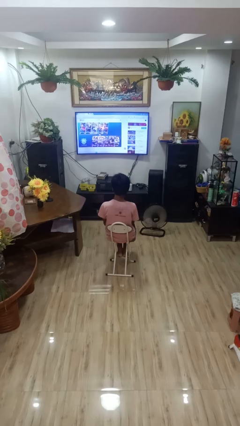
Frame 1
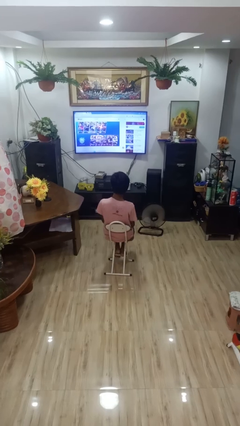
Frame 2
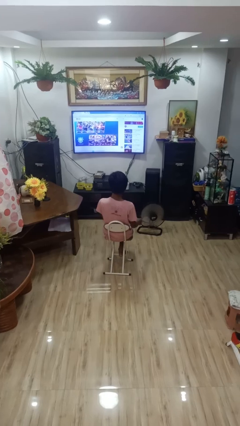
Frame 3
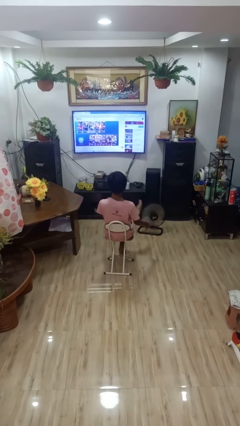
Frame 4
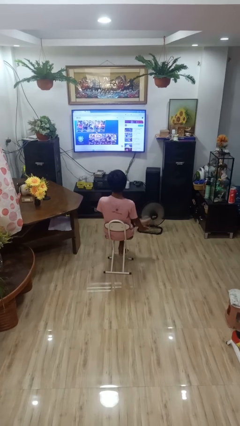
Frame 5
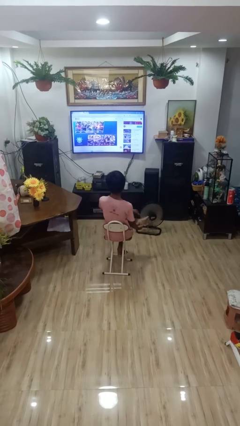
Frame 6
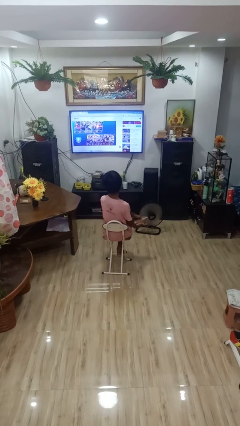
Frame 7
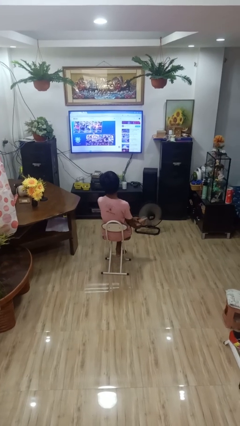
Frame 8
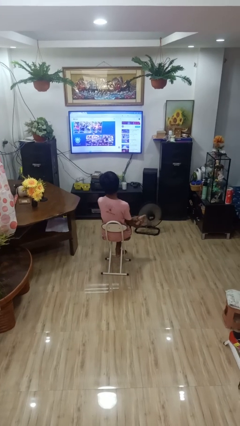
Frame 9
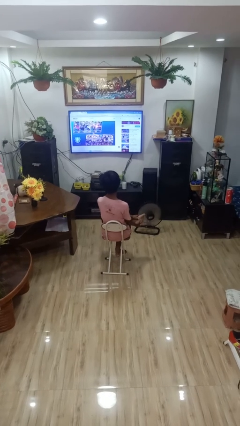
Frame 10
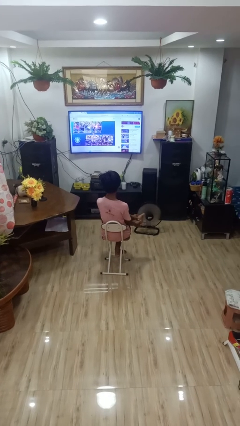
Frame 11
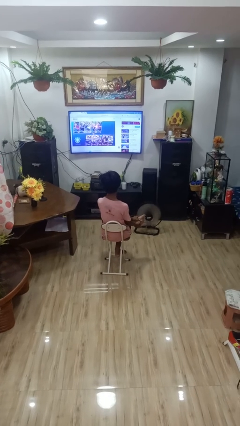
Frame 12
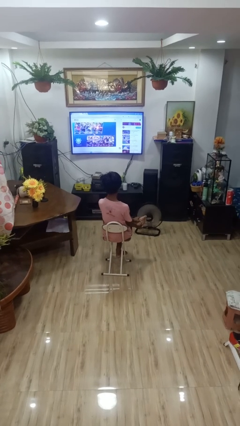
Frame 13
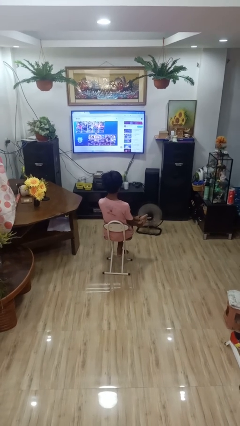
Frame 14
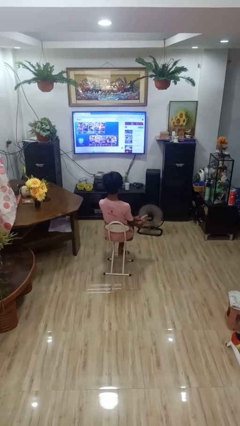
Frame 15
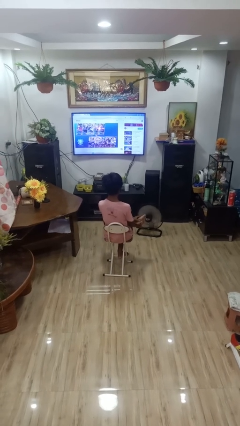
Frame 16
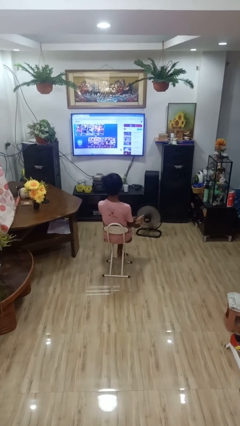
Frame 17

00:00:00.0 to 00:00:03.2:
person rubs foot

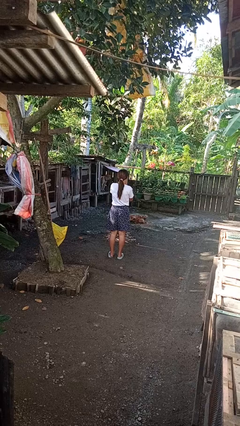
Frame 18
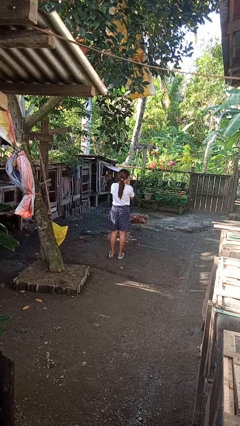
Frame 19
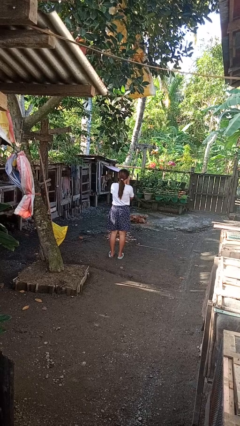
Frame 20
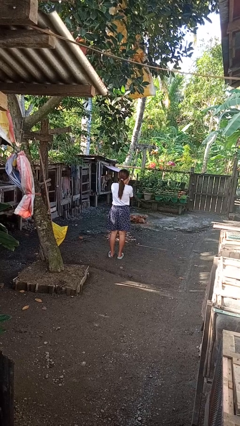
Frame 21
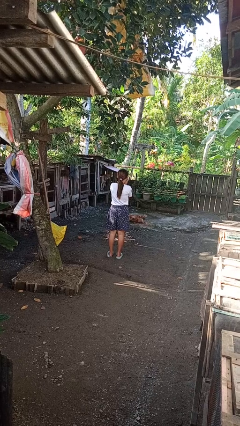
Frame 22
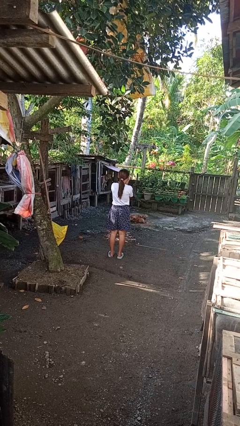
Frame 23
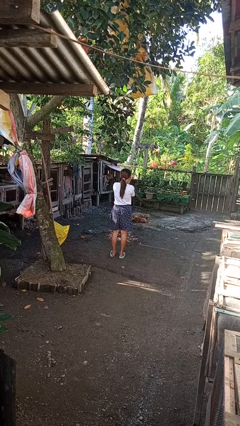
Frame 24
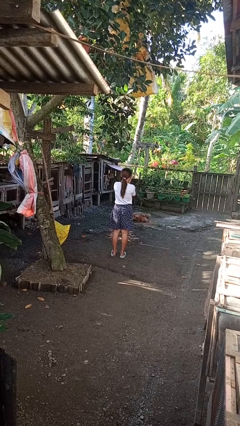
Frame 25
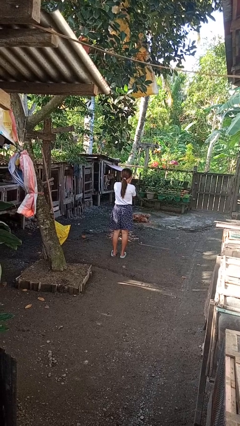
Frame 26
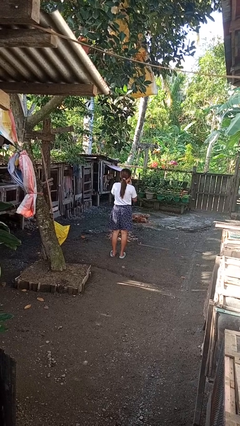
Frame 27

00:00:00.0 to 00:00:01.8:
person blows into hands

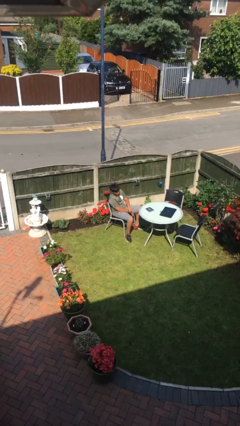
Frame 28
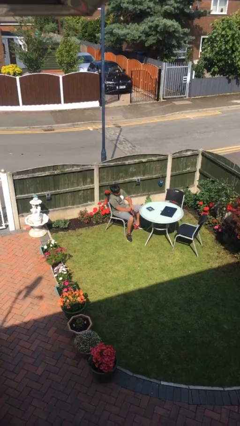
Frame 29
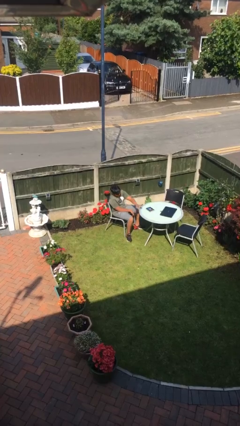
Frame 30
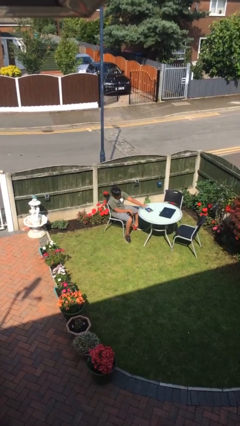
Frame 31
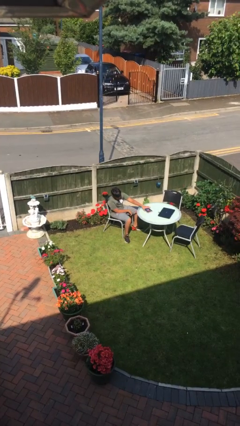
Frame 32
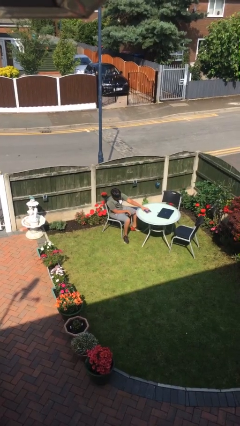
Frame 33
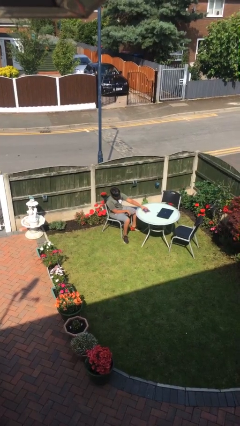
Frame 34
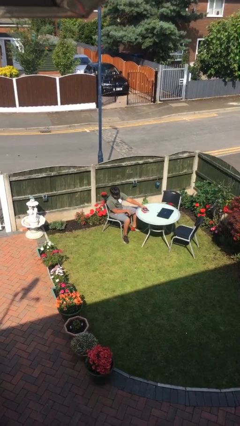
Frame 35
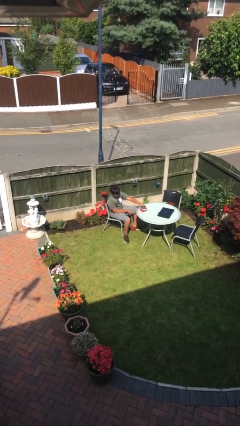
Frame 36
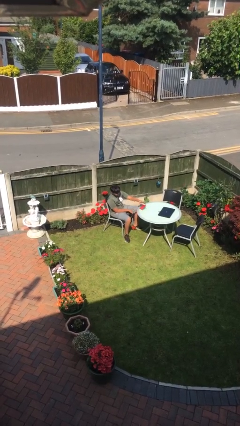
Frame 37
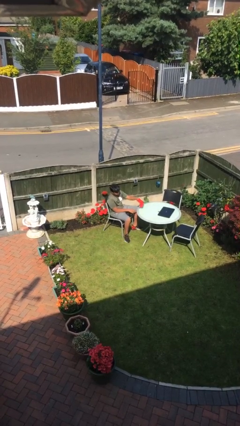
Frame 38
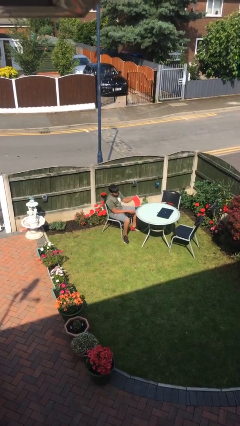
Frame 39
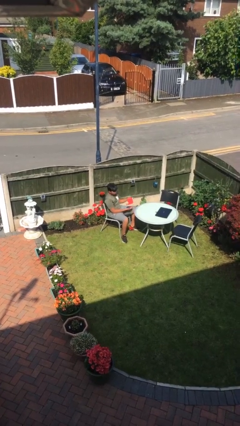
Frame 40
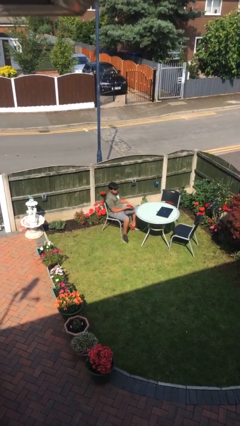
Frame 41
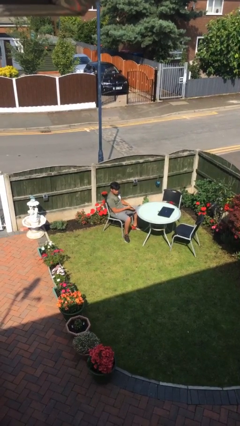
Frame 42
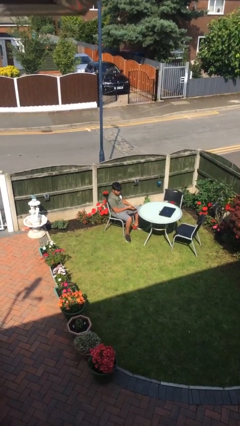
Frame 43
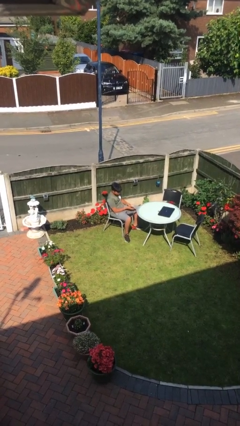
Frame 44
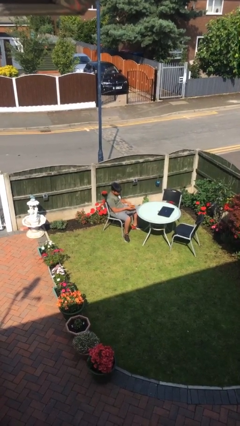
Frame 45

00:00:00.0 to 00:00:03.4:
person picks up object from table

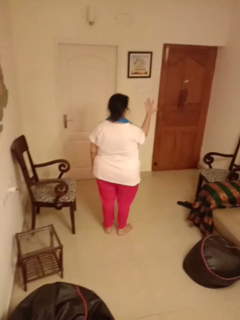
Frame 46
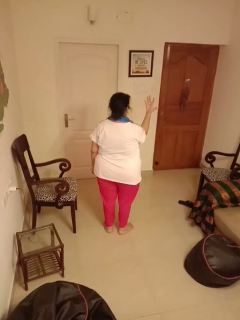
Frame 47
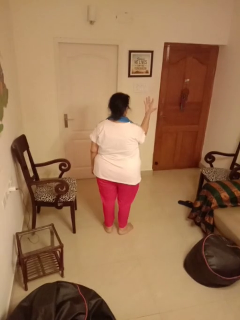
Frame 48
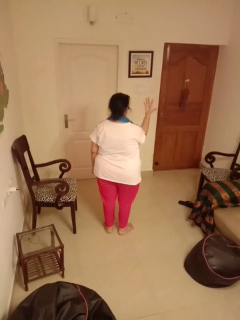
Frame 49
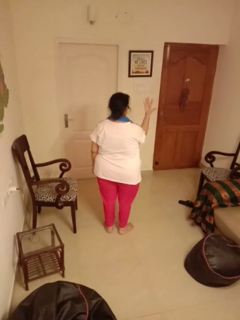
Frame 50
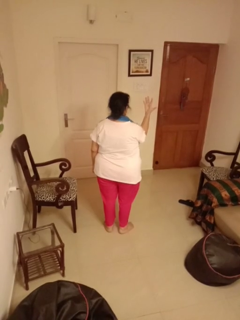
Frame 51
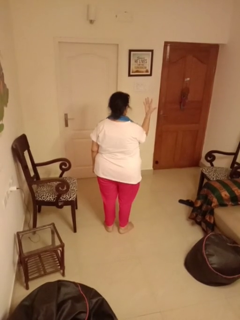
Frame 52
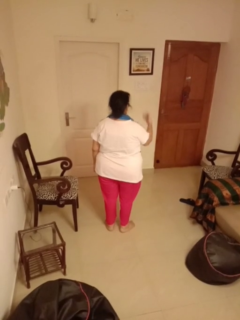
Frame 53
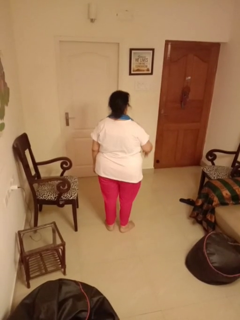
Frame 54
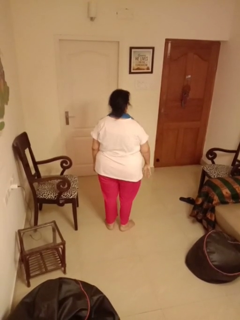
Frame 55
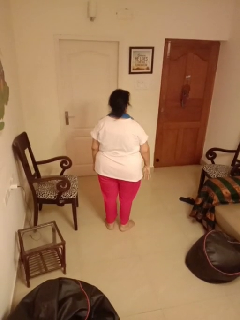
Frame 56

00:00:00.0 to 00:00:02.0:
person gestures number five

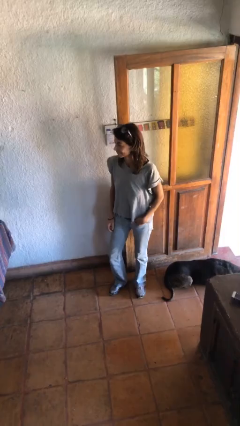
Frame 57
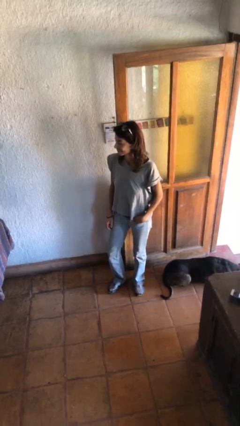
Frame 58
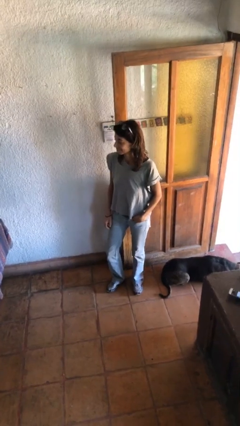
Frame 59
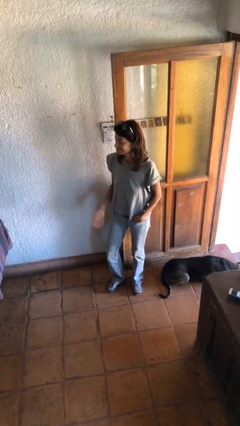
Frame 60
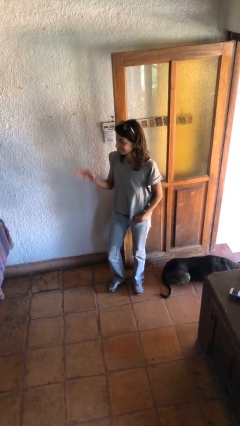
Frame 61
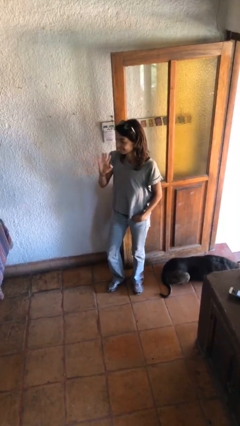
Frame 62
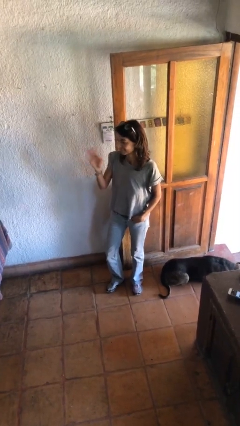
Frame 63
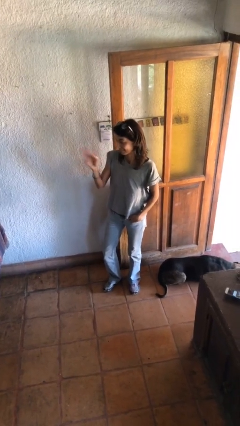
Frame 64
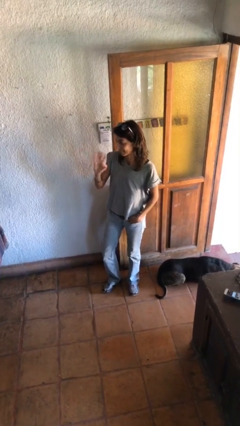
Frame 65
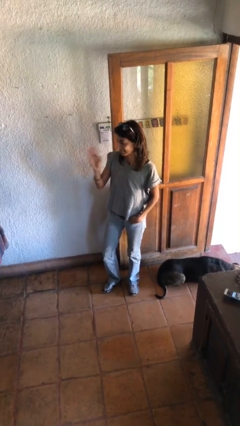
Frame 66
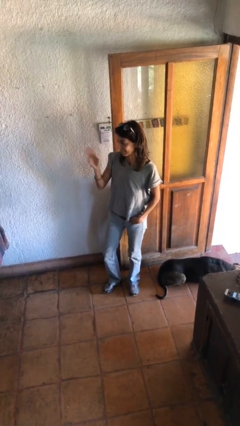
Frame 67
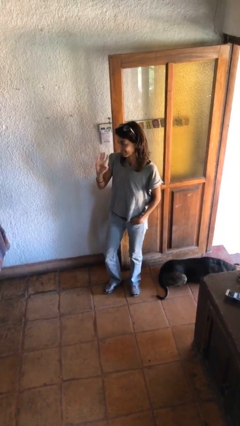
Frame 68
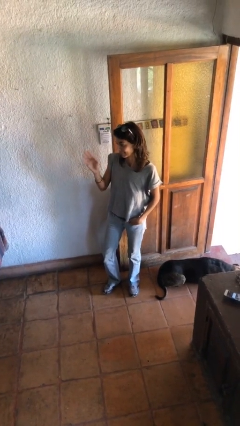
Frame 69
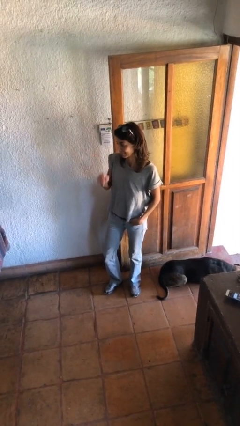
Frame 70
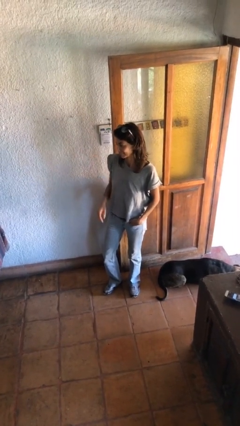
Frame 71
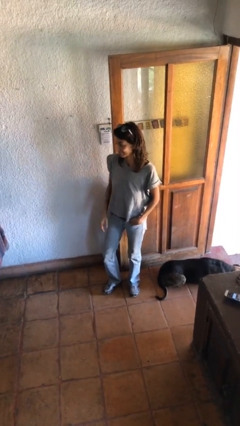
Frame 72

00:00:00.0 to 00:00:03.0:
person waves at person

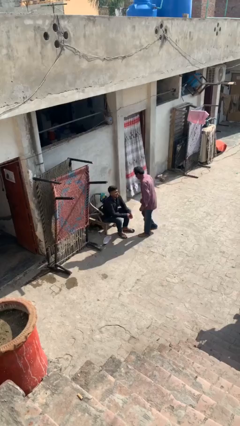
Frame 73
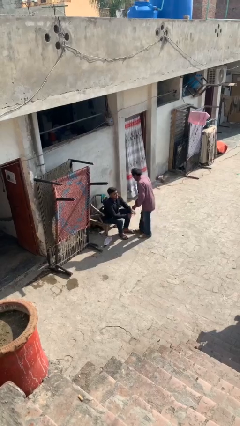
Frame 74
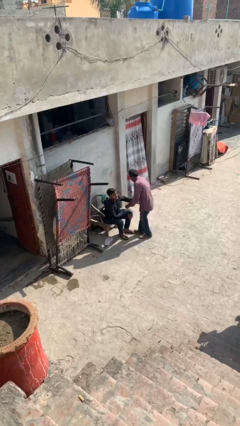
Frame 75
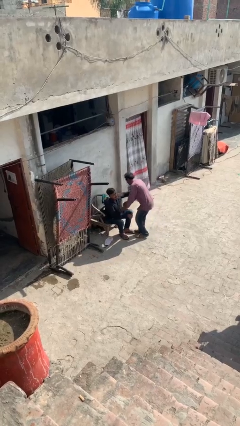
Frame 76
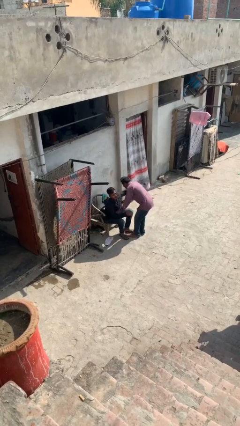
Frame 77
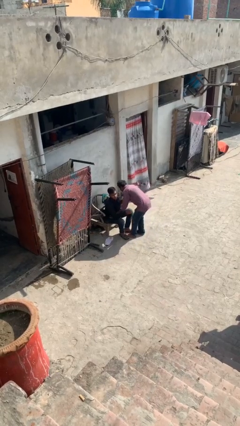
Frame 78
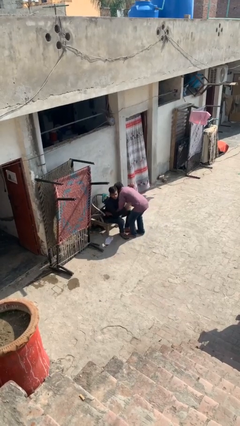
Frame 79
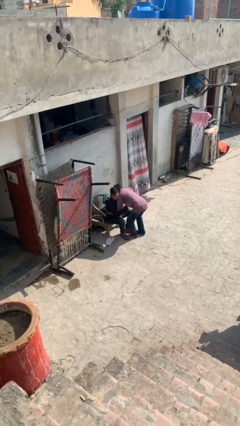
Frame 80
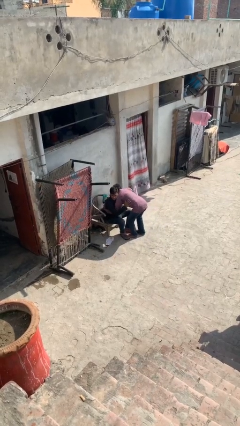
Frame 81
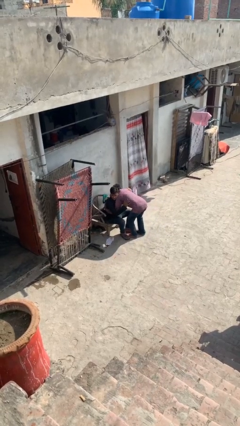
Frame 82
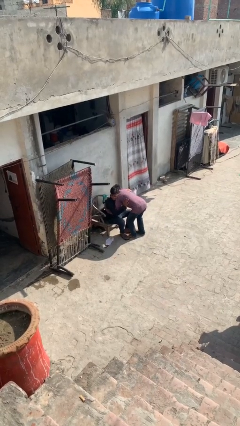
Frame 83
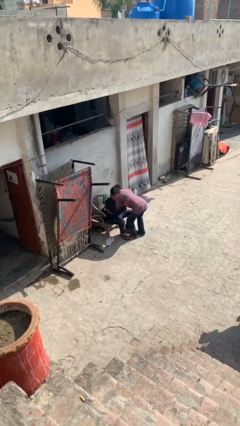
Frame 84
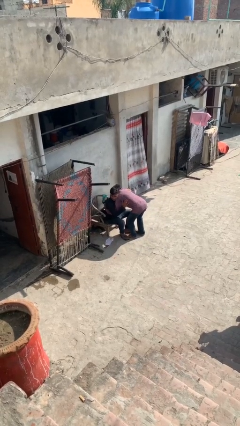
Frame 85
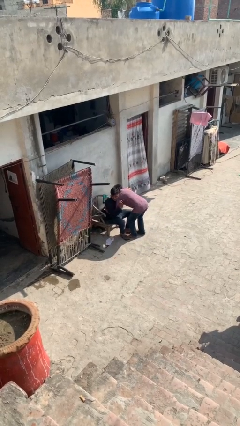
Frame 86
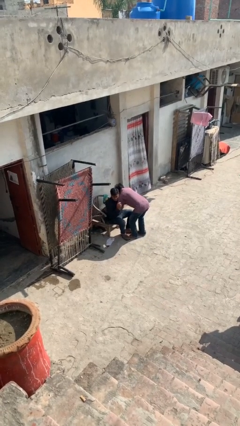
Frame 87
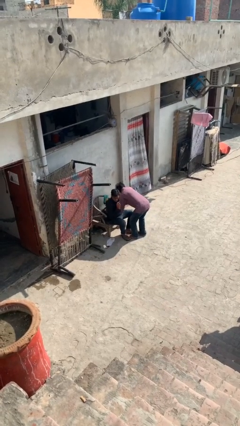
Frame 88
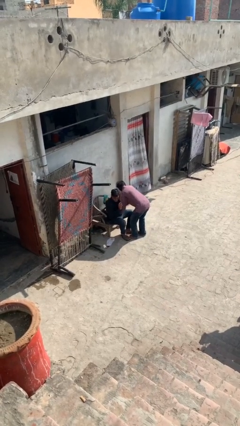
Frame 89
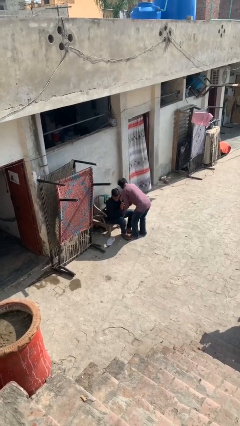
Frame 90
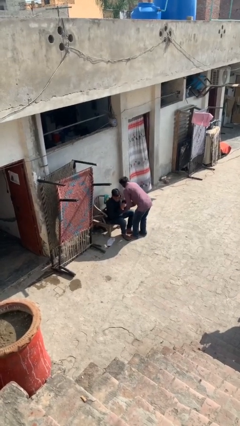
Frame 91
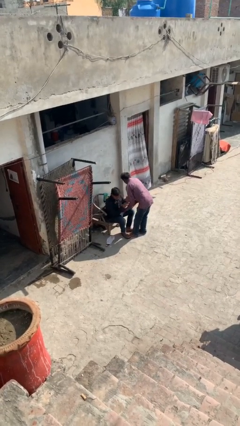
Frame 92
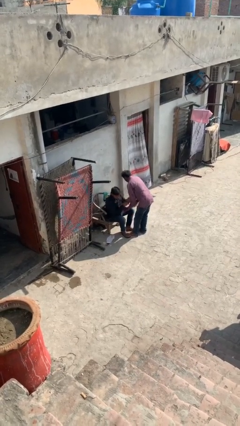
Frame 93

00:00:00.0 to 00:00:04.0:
person embraces person
